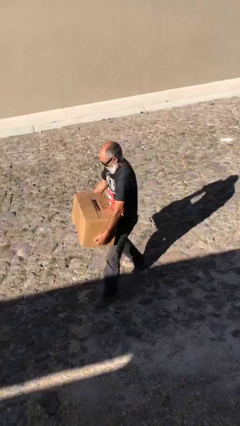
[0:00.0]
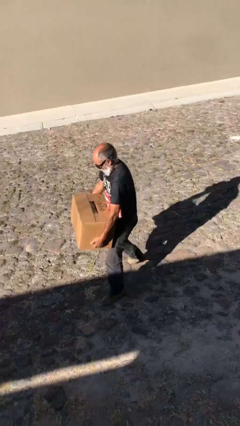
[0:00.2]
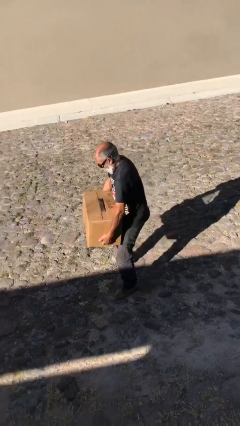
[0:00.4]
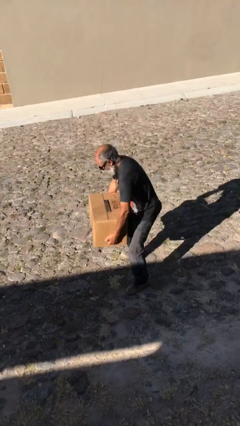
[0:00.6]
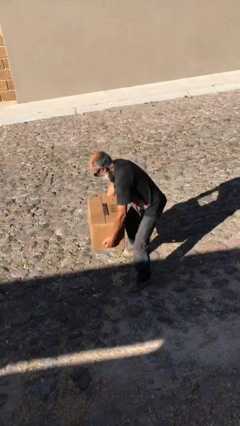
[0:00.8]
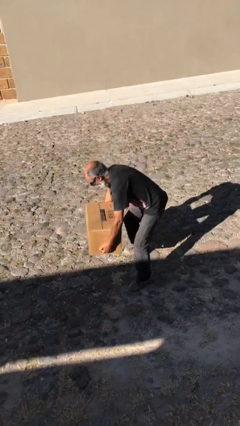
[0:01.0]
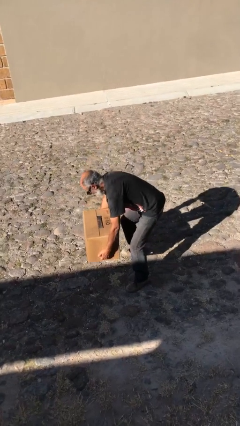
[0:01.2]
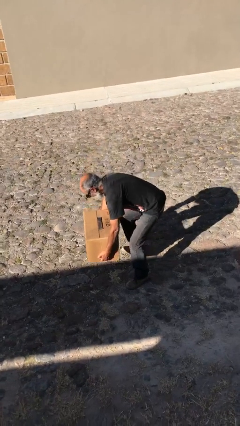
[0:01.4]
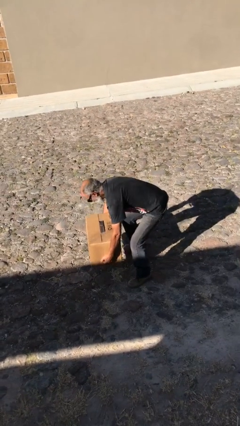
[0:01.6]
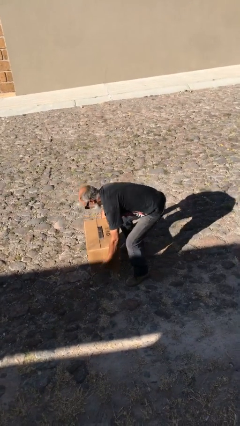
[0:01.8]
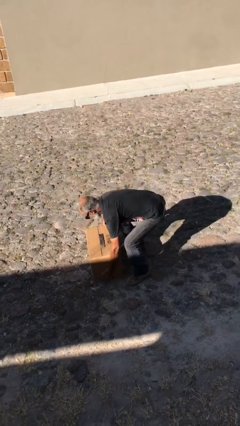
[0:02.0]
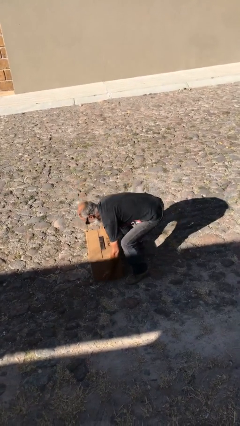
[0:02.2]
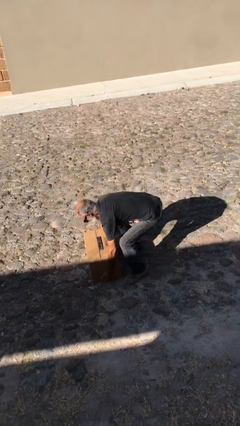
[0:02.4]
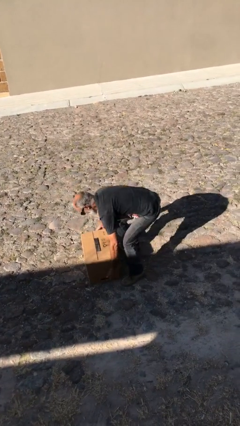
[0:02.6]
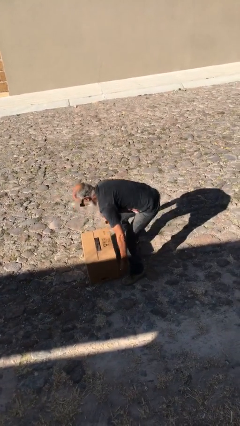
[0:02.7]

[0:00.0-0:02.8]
person puts down object on floor

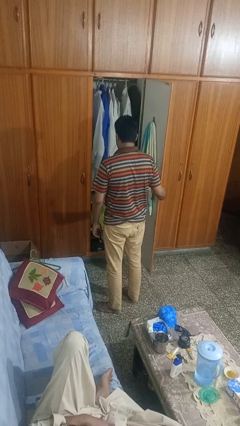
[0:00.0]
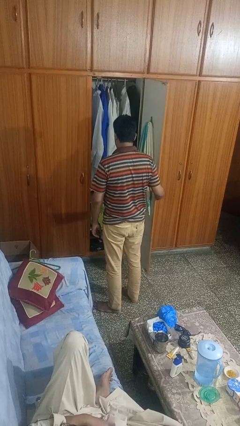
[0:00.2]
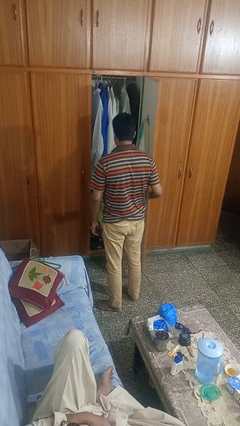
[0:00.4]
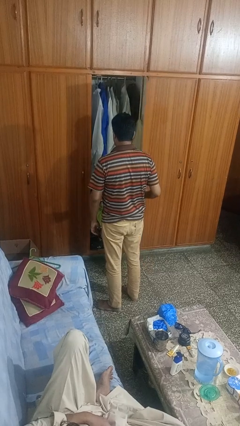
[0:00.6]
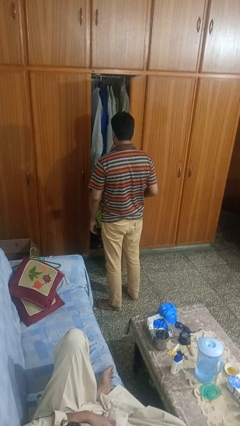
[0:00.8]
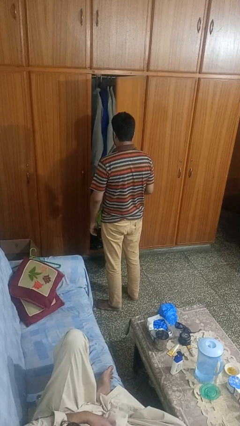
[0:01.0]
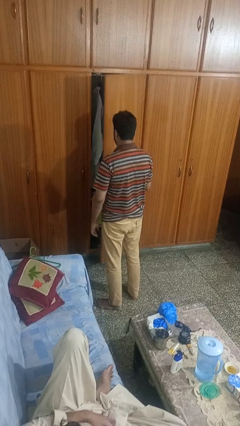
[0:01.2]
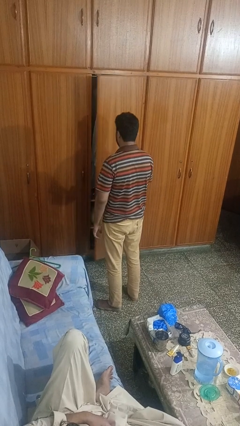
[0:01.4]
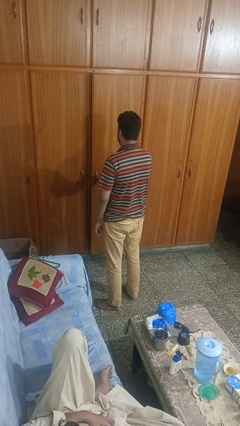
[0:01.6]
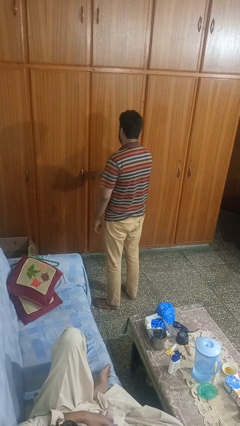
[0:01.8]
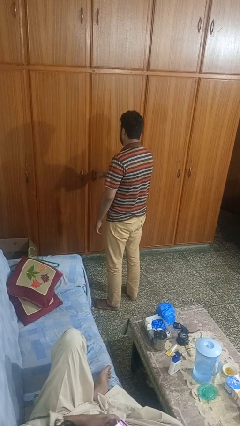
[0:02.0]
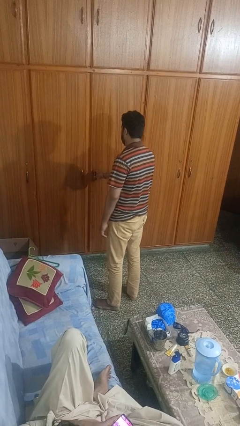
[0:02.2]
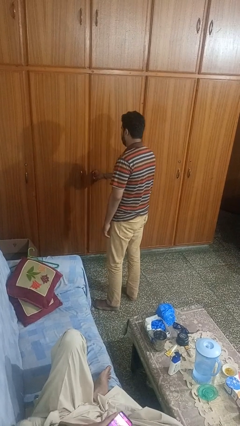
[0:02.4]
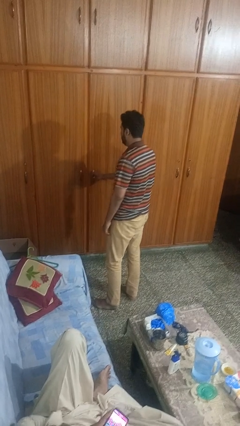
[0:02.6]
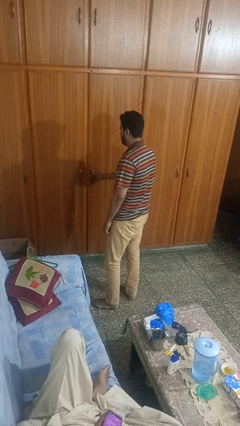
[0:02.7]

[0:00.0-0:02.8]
person closes closet door

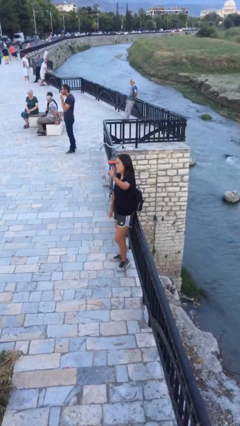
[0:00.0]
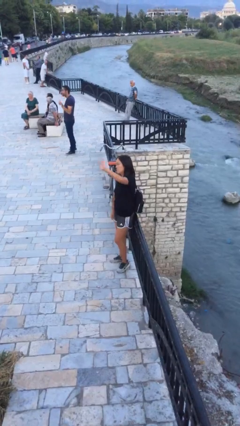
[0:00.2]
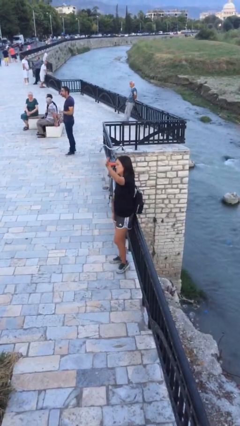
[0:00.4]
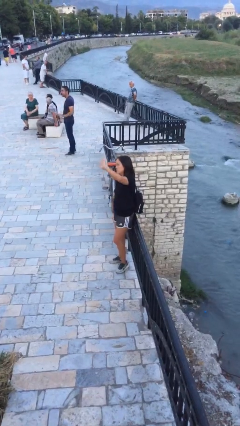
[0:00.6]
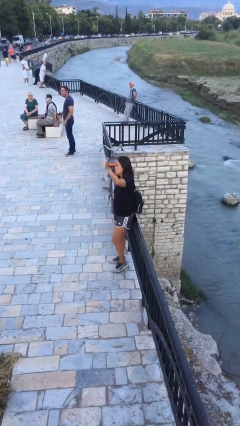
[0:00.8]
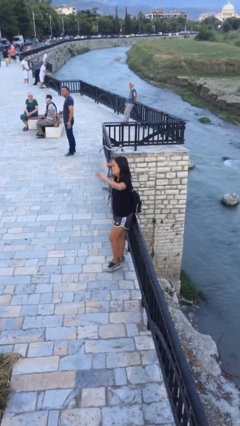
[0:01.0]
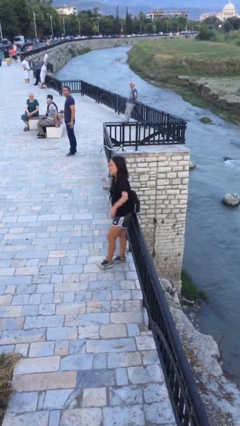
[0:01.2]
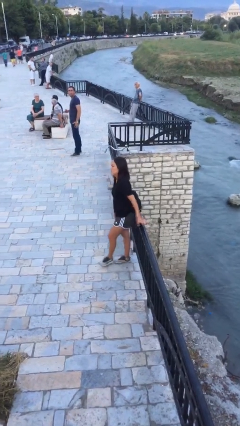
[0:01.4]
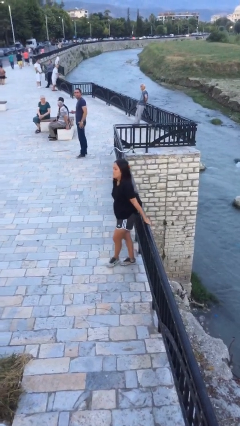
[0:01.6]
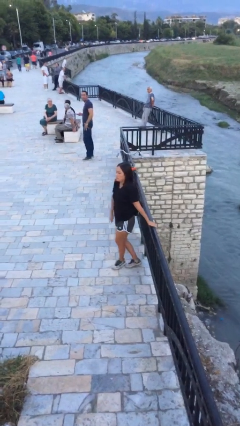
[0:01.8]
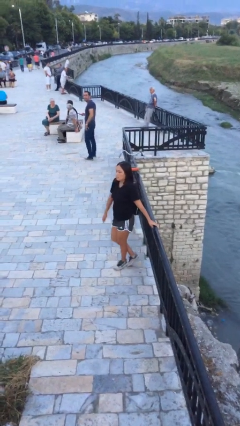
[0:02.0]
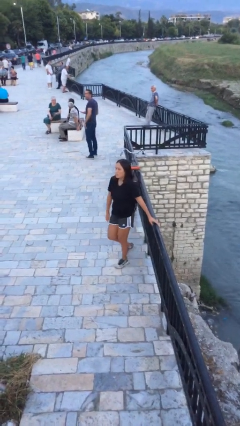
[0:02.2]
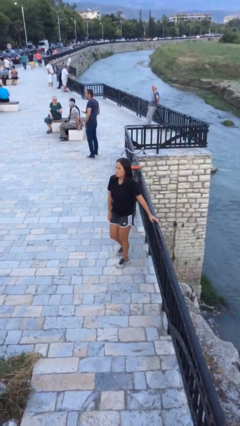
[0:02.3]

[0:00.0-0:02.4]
person waves at person

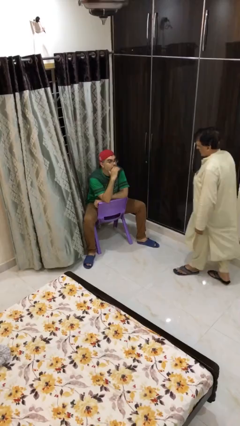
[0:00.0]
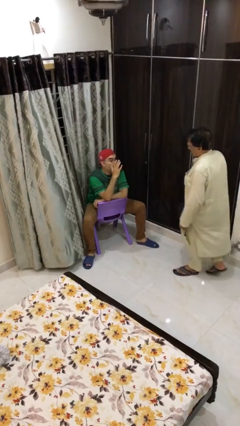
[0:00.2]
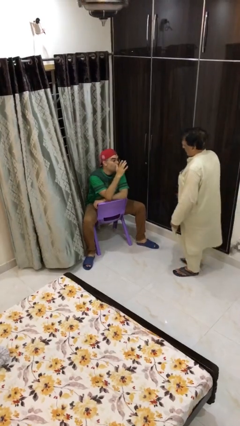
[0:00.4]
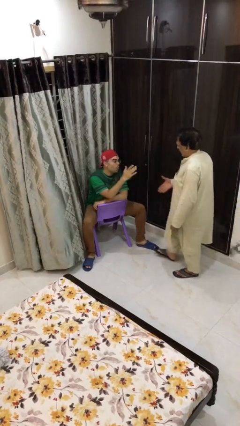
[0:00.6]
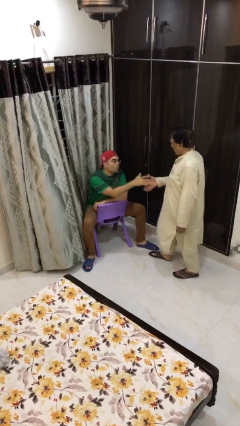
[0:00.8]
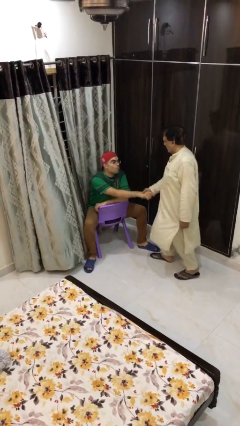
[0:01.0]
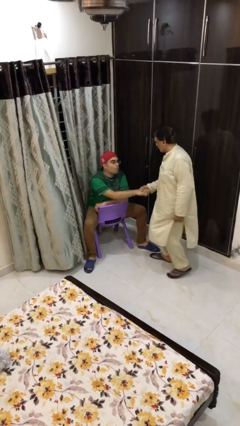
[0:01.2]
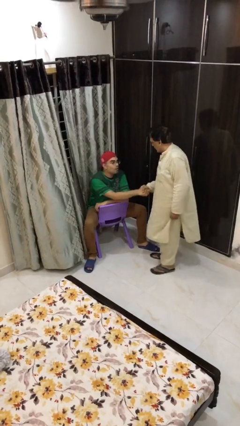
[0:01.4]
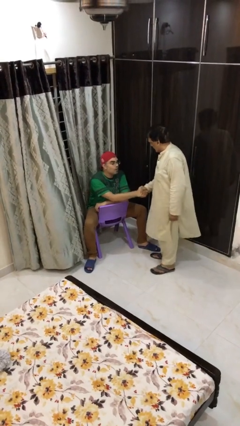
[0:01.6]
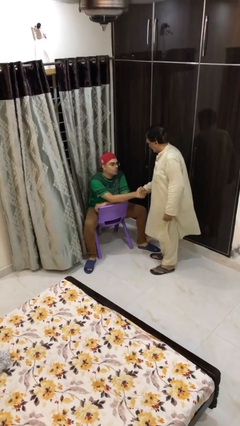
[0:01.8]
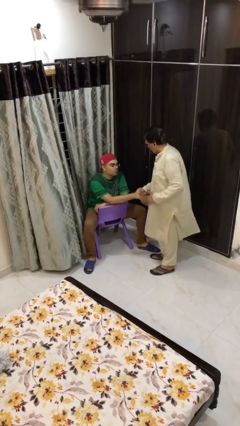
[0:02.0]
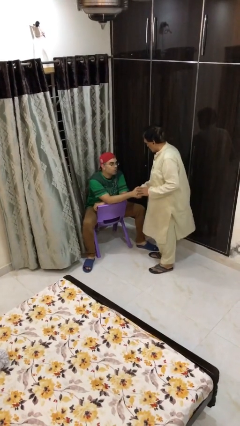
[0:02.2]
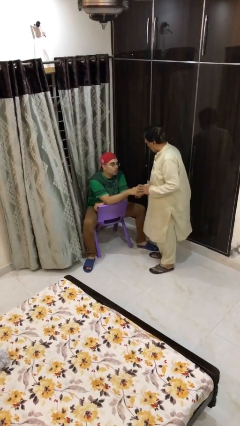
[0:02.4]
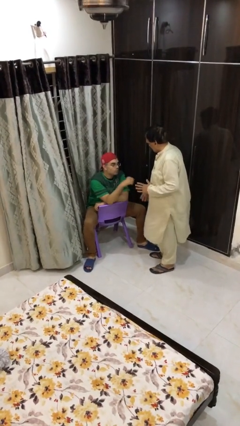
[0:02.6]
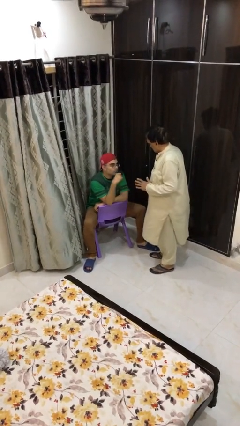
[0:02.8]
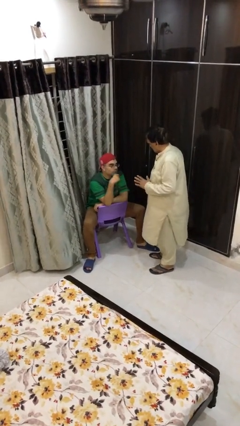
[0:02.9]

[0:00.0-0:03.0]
person shakes hand

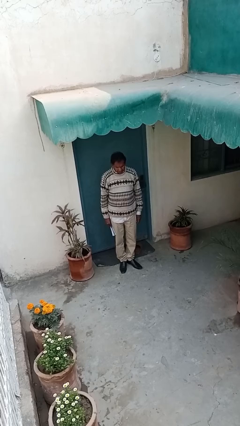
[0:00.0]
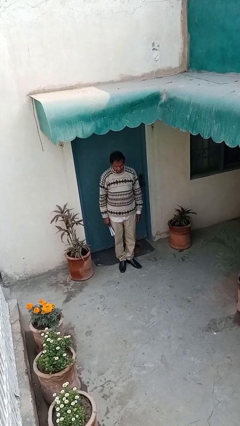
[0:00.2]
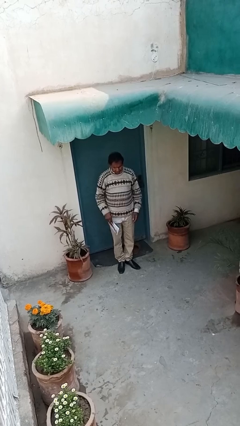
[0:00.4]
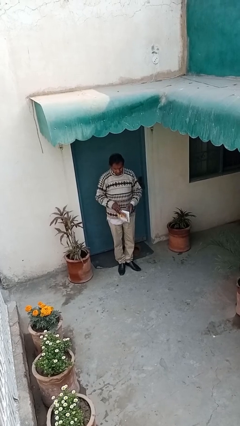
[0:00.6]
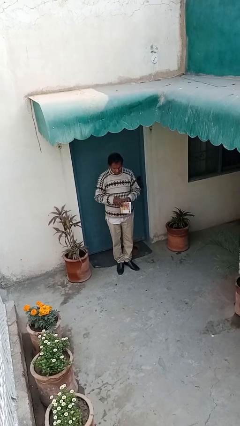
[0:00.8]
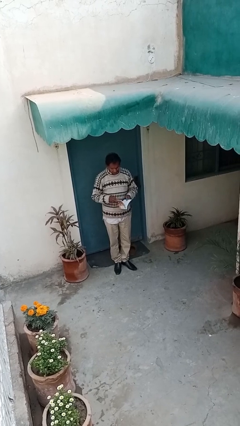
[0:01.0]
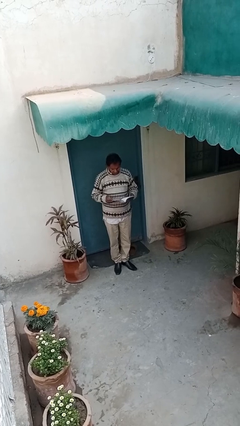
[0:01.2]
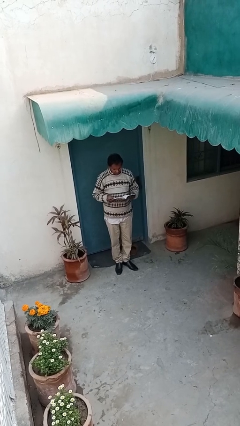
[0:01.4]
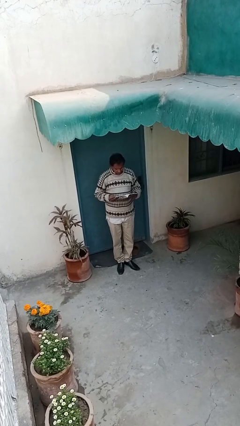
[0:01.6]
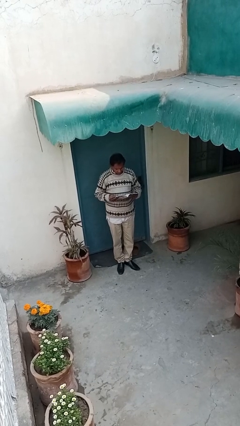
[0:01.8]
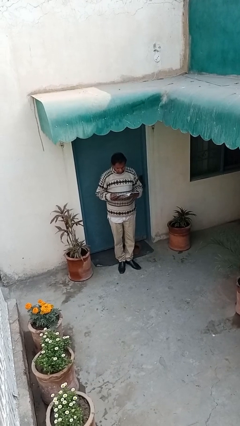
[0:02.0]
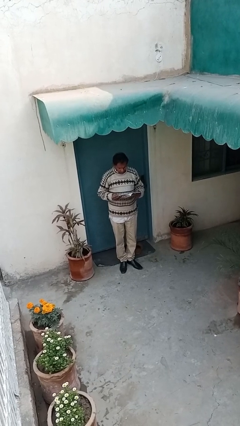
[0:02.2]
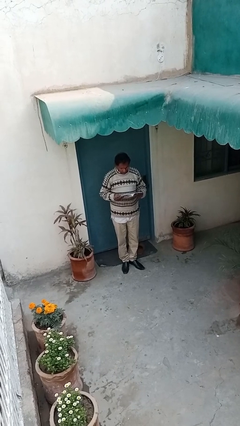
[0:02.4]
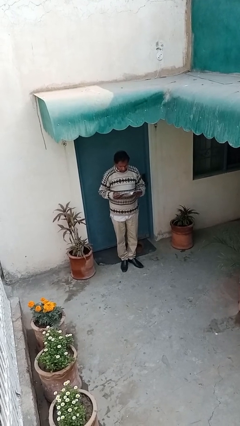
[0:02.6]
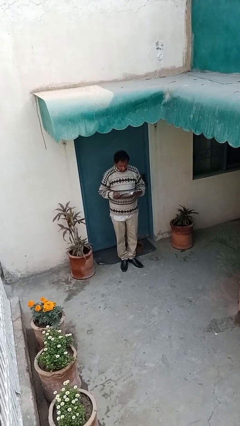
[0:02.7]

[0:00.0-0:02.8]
person reads document

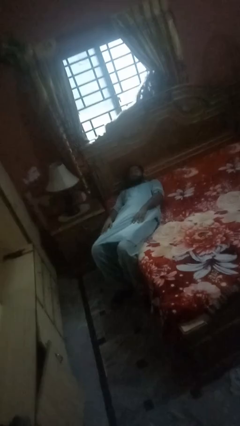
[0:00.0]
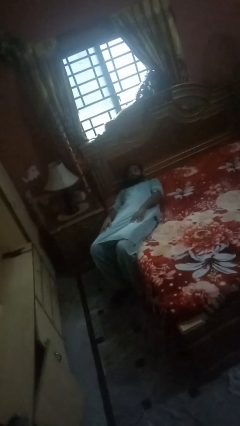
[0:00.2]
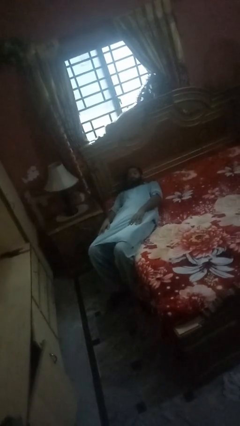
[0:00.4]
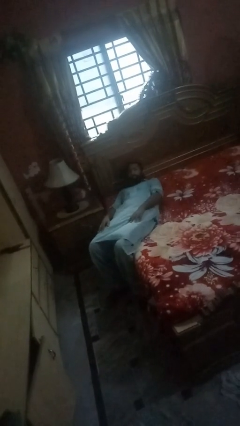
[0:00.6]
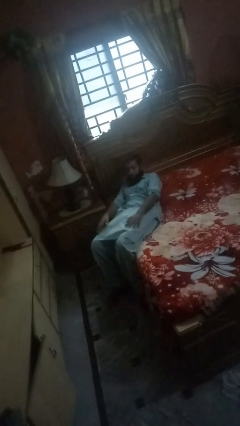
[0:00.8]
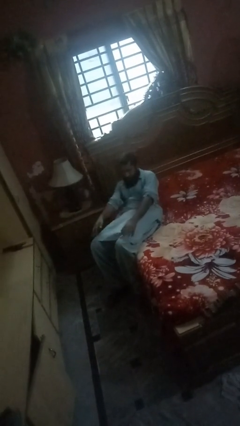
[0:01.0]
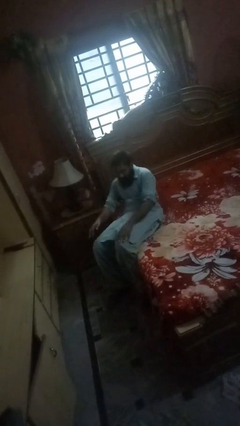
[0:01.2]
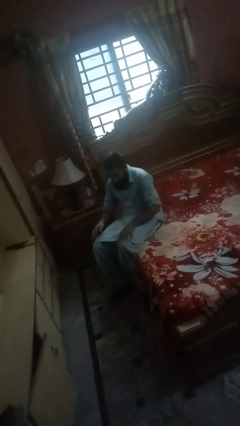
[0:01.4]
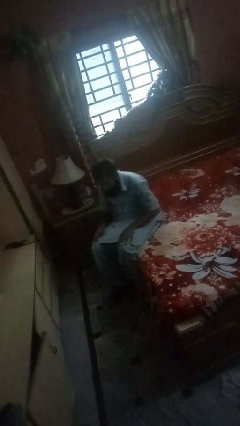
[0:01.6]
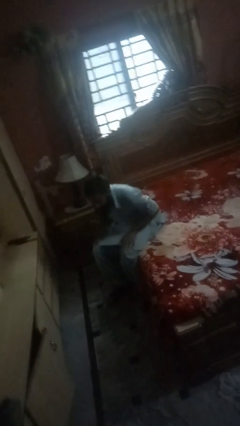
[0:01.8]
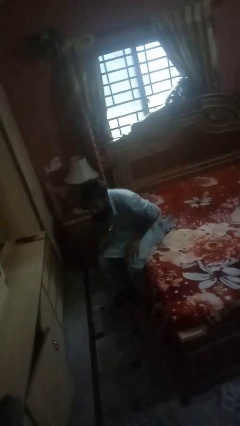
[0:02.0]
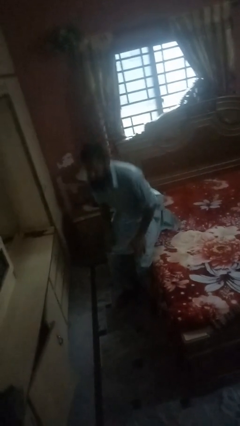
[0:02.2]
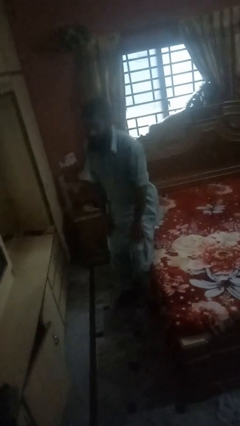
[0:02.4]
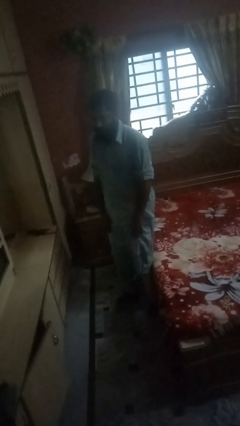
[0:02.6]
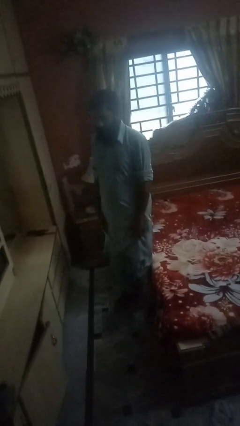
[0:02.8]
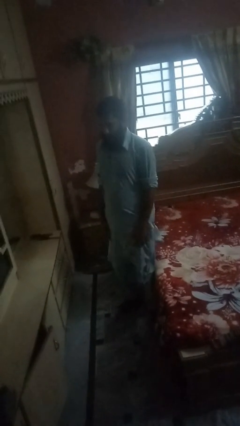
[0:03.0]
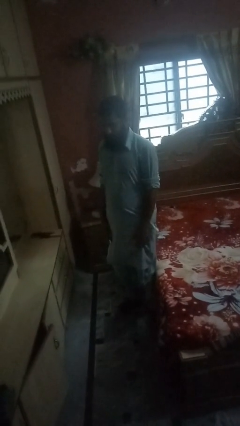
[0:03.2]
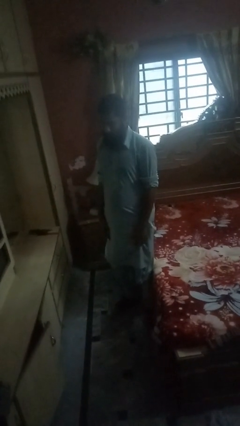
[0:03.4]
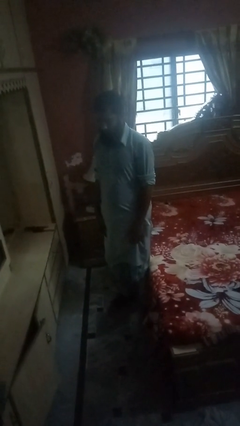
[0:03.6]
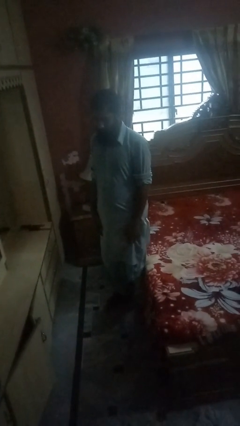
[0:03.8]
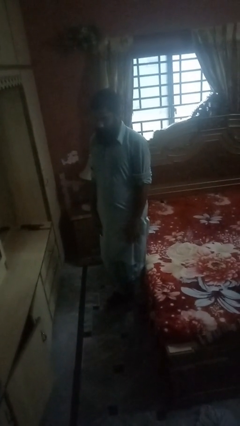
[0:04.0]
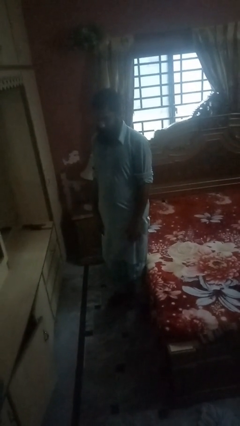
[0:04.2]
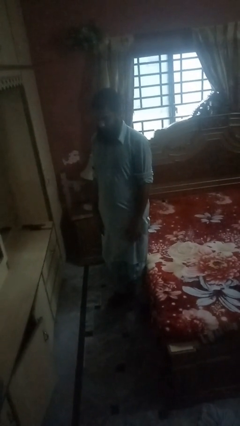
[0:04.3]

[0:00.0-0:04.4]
person stands up
